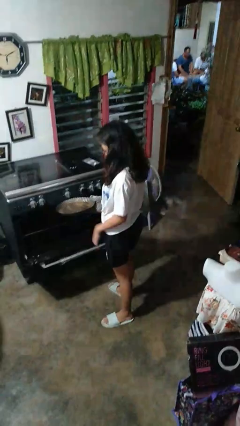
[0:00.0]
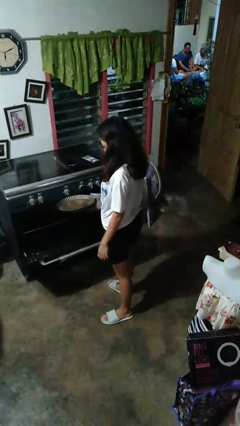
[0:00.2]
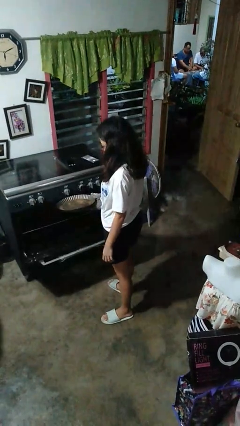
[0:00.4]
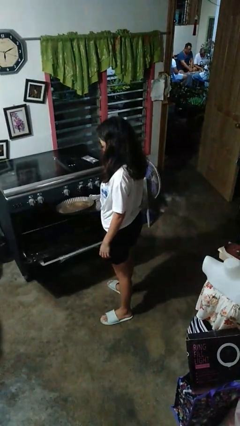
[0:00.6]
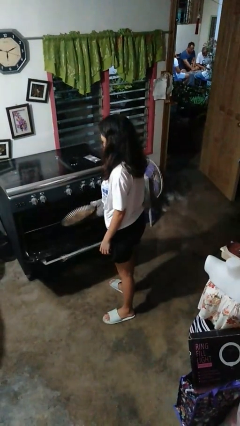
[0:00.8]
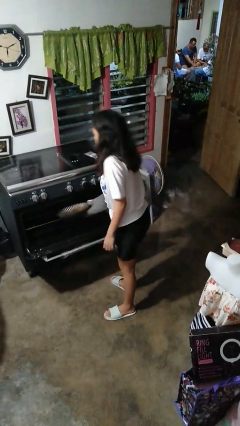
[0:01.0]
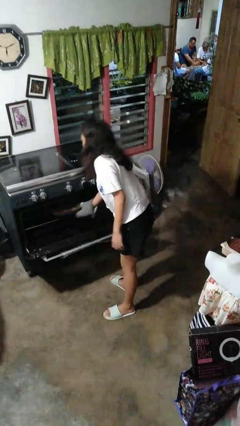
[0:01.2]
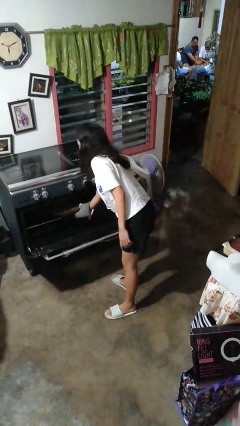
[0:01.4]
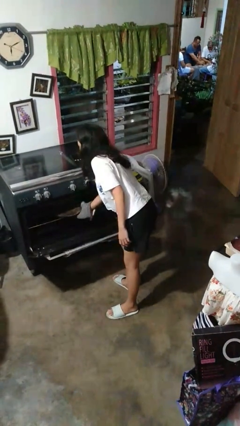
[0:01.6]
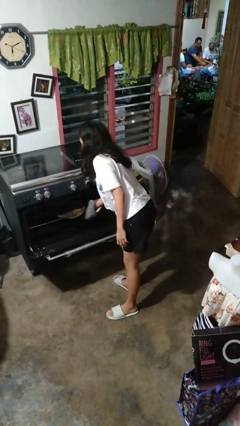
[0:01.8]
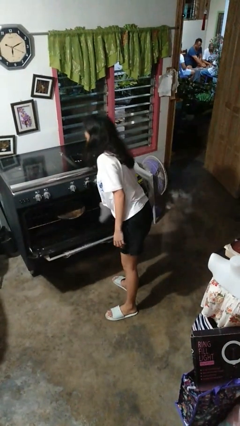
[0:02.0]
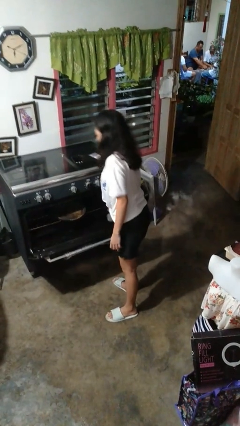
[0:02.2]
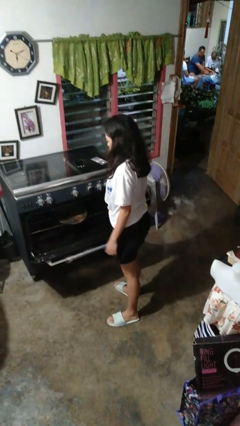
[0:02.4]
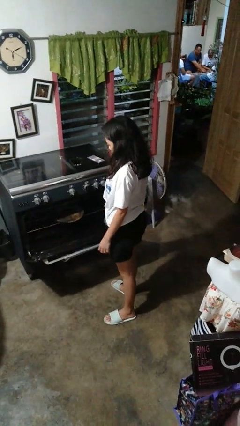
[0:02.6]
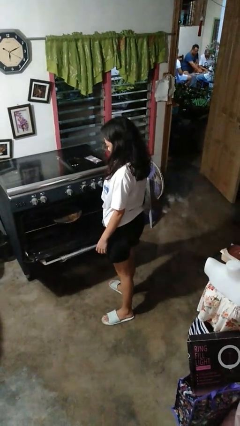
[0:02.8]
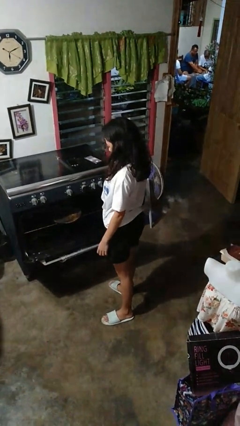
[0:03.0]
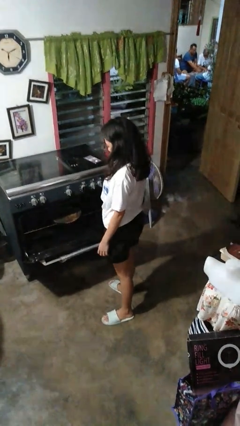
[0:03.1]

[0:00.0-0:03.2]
person puts object into oven

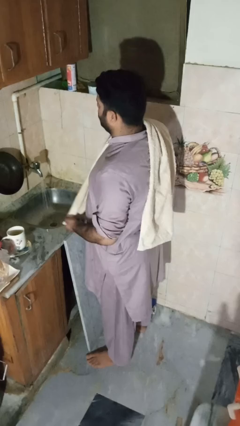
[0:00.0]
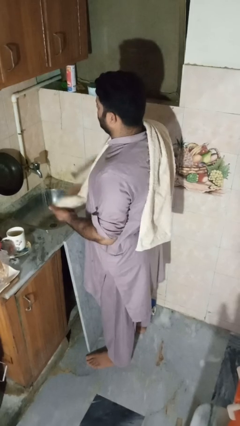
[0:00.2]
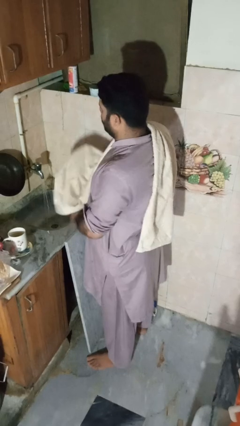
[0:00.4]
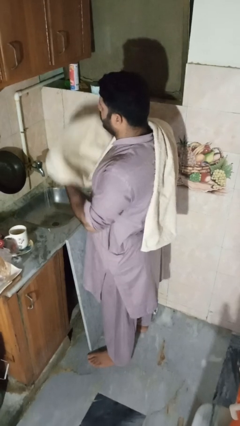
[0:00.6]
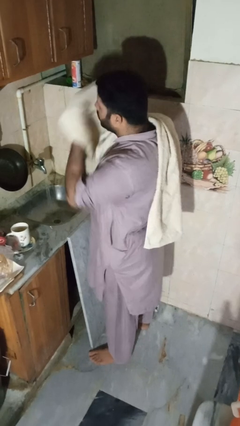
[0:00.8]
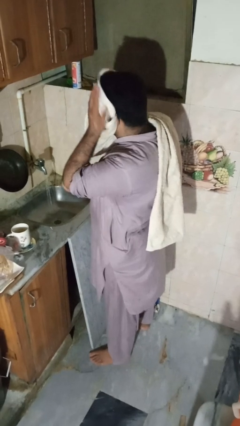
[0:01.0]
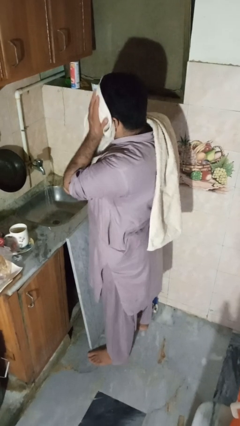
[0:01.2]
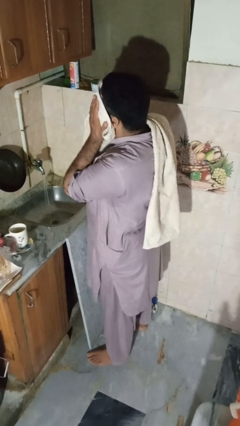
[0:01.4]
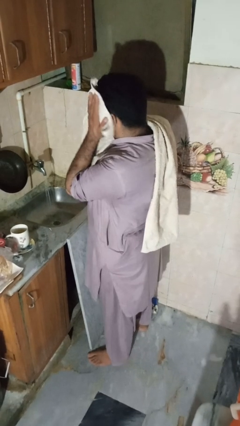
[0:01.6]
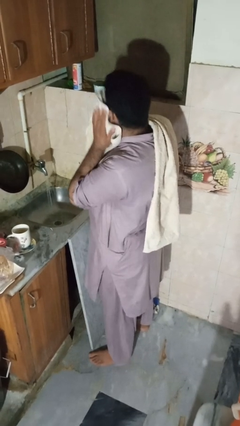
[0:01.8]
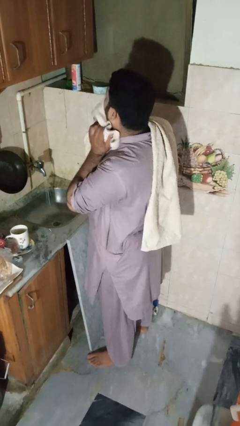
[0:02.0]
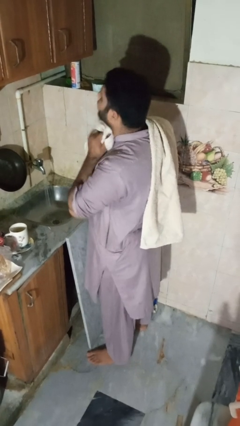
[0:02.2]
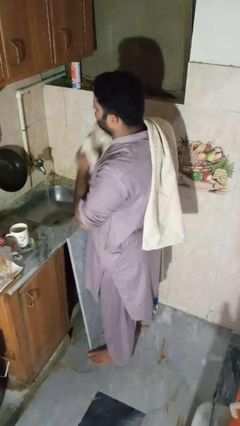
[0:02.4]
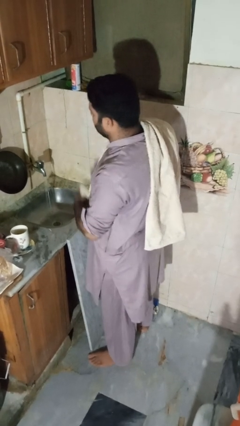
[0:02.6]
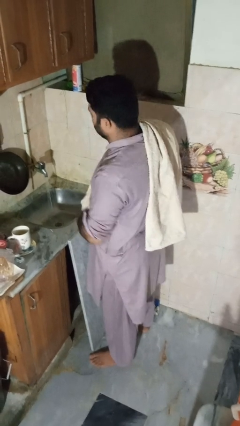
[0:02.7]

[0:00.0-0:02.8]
person dries face with towel

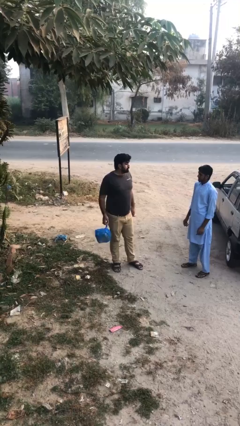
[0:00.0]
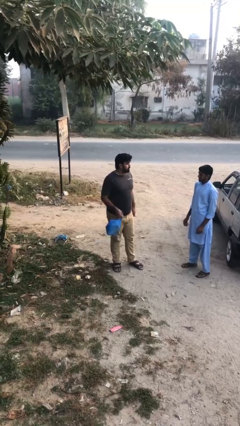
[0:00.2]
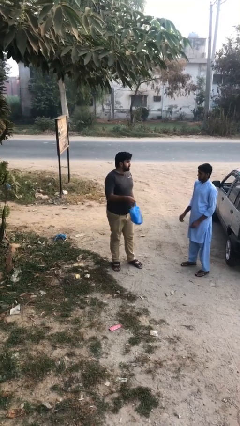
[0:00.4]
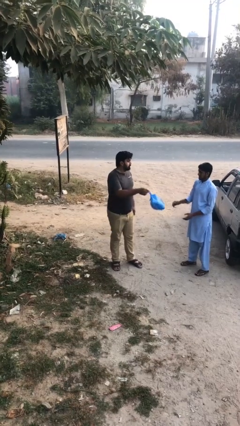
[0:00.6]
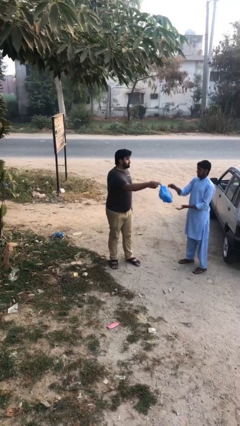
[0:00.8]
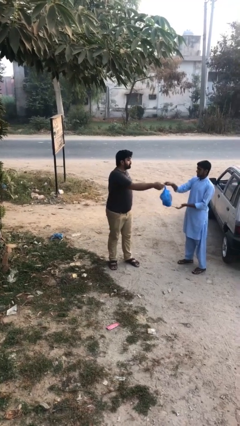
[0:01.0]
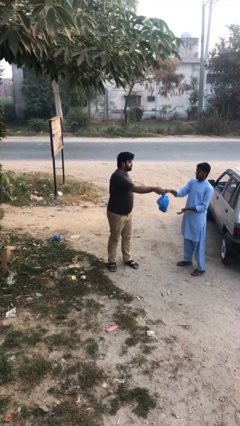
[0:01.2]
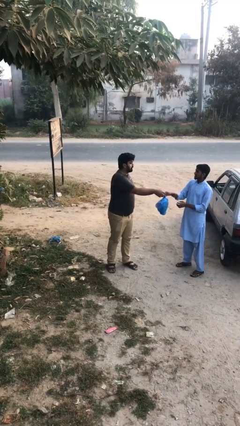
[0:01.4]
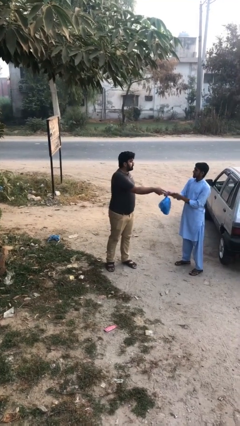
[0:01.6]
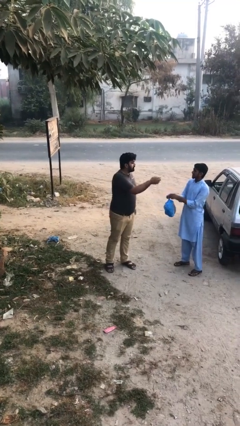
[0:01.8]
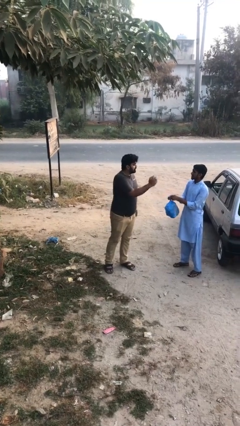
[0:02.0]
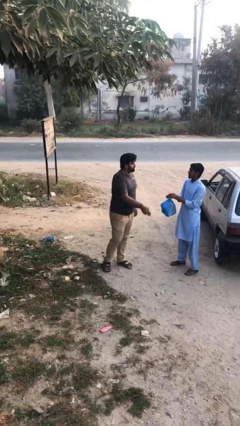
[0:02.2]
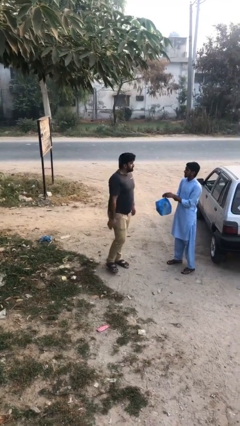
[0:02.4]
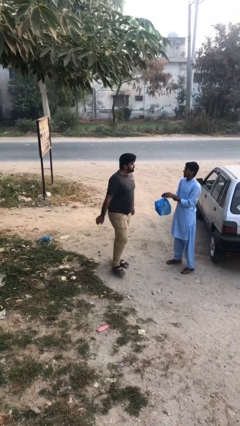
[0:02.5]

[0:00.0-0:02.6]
person transfers object to person

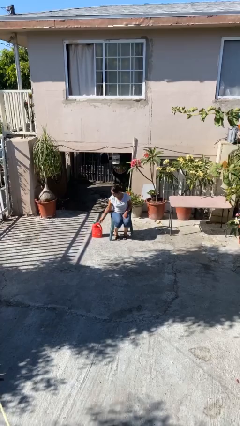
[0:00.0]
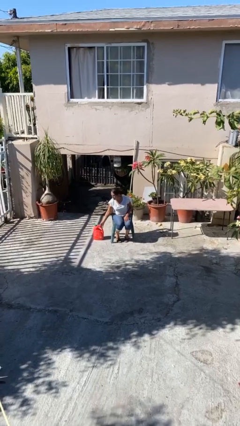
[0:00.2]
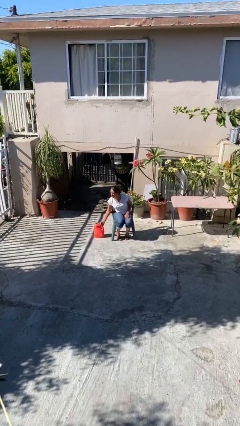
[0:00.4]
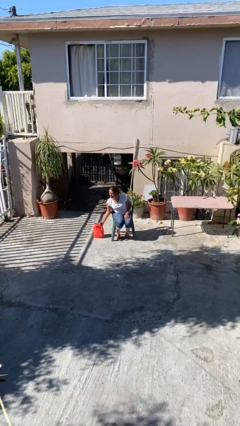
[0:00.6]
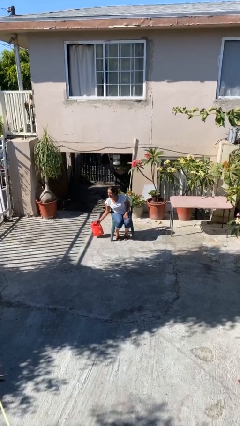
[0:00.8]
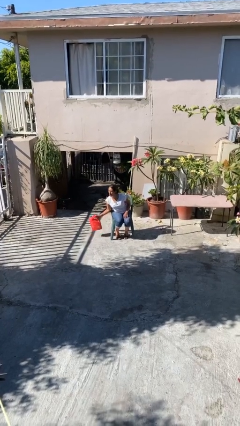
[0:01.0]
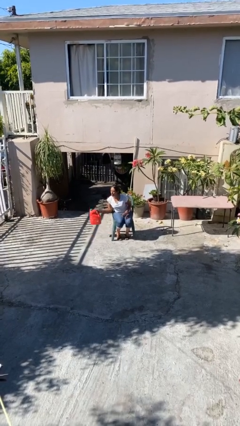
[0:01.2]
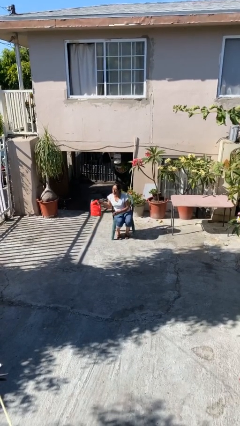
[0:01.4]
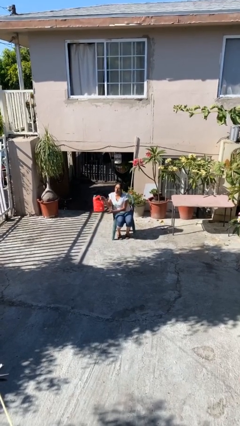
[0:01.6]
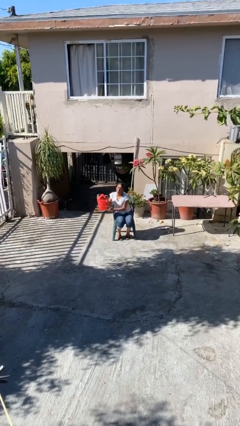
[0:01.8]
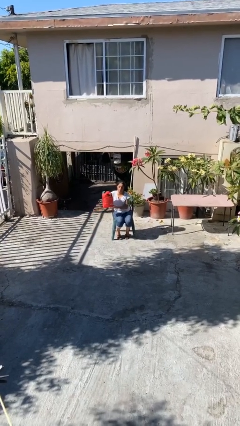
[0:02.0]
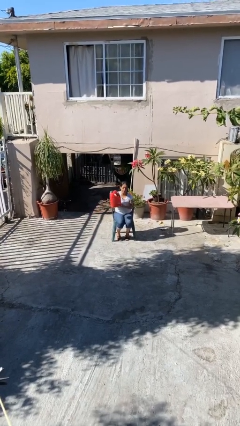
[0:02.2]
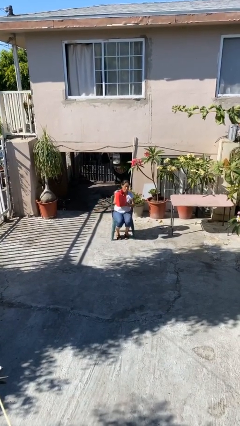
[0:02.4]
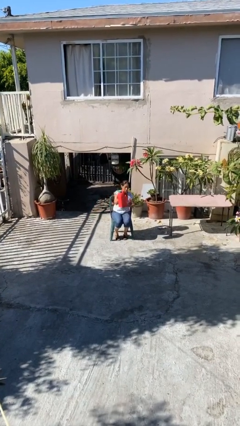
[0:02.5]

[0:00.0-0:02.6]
person picks up object from floor

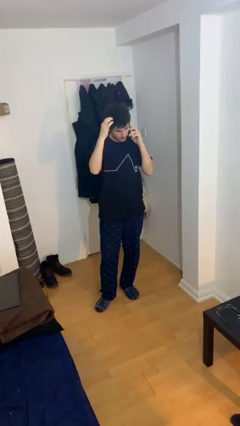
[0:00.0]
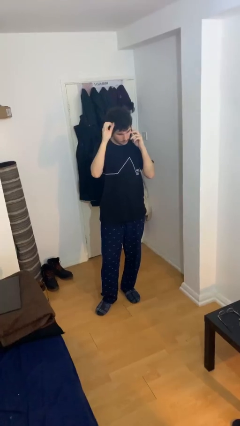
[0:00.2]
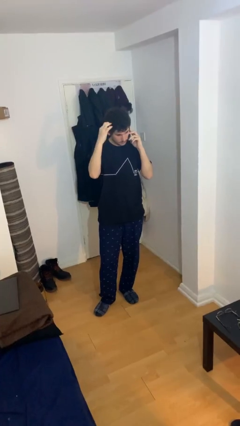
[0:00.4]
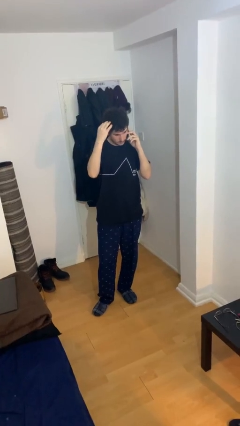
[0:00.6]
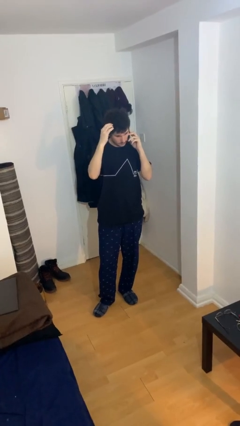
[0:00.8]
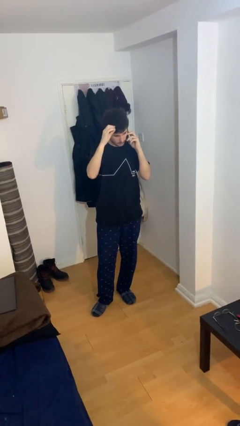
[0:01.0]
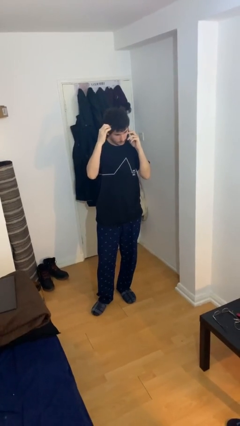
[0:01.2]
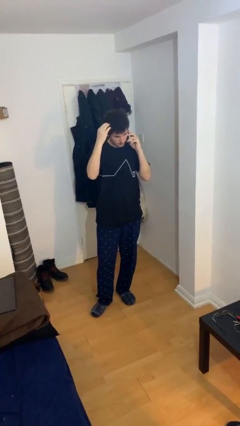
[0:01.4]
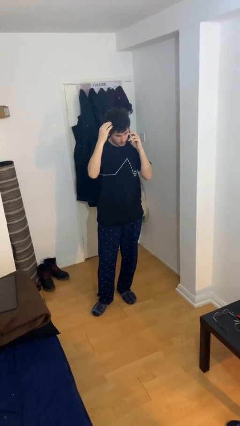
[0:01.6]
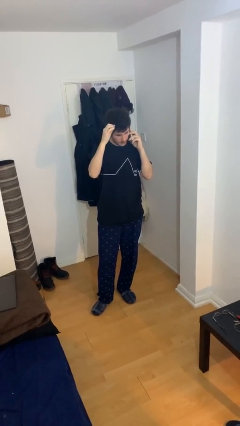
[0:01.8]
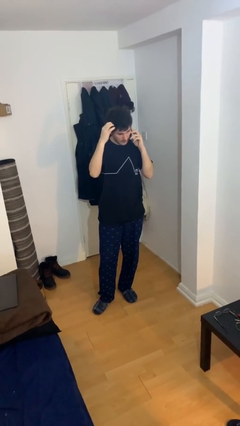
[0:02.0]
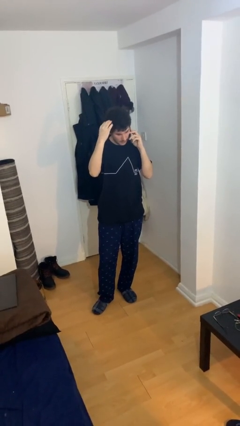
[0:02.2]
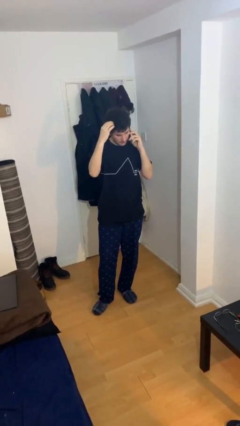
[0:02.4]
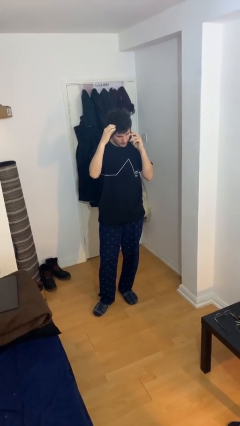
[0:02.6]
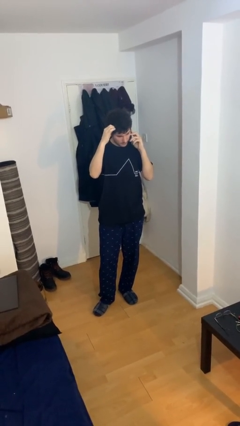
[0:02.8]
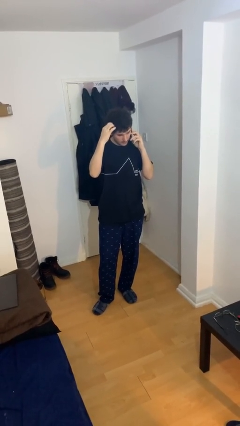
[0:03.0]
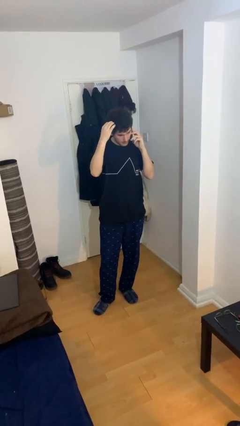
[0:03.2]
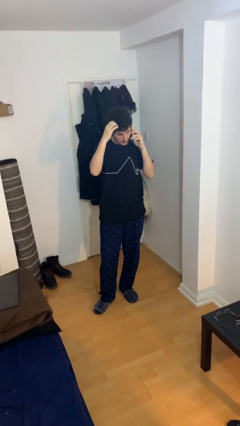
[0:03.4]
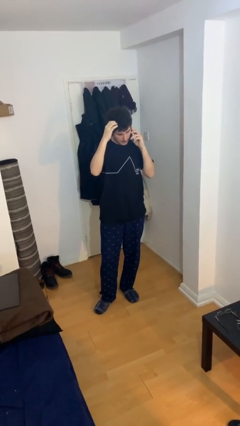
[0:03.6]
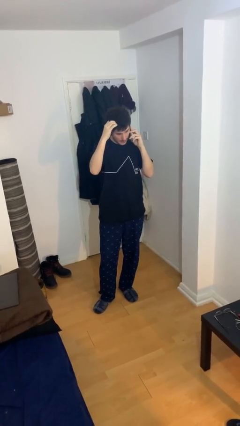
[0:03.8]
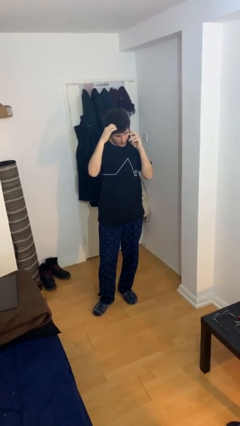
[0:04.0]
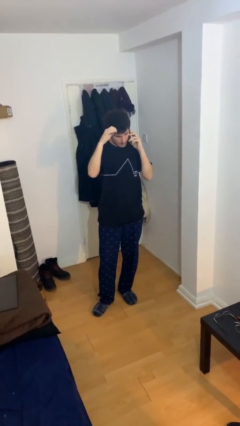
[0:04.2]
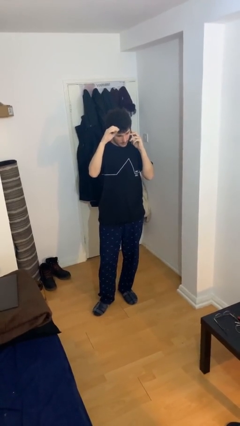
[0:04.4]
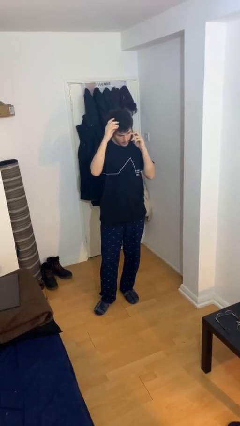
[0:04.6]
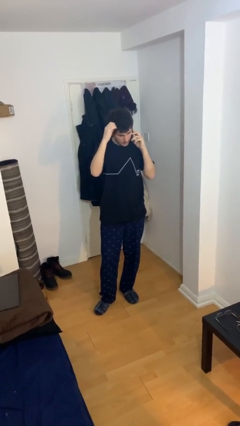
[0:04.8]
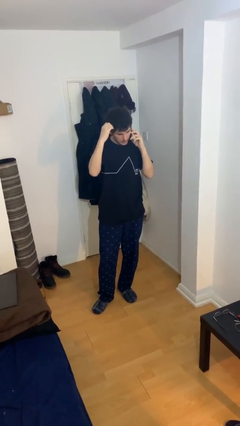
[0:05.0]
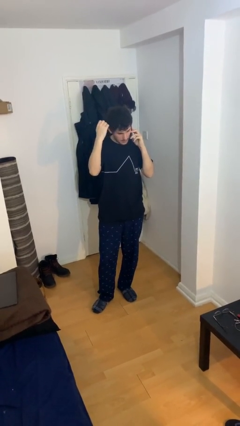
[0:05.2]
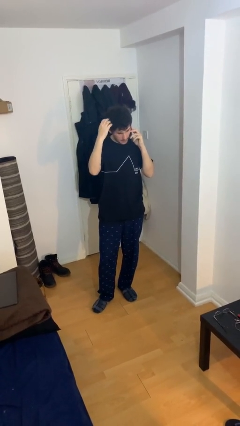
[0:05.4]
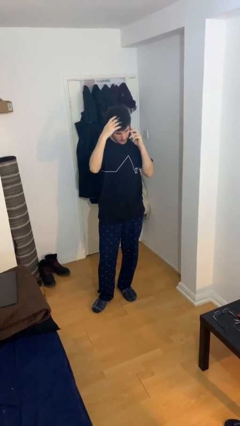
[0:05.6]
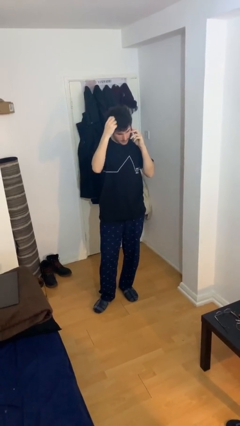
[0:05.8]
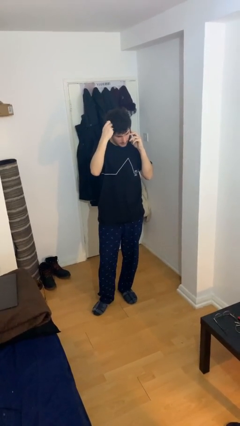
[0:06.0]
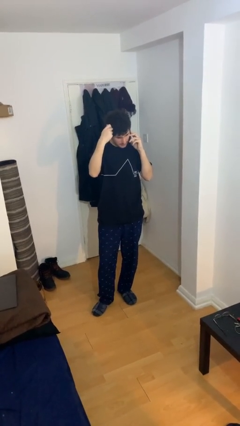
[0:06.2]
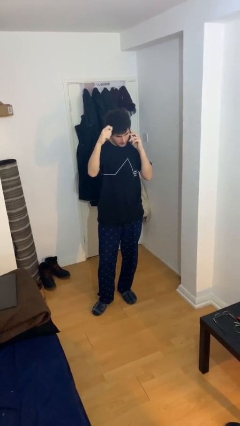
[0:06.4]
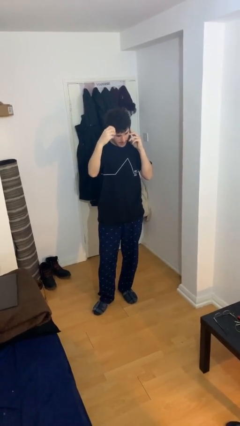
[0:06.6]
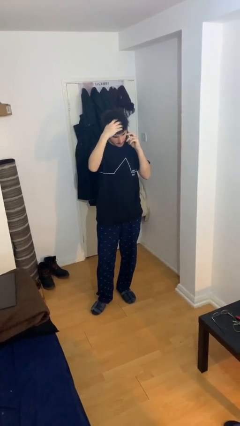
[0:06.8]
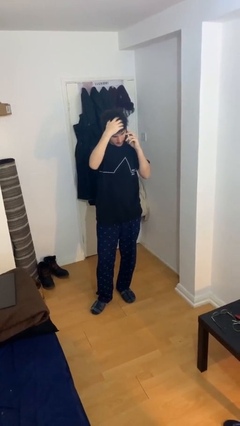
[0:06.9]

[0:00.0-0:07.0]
person talks on phone
